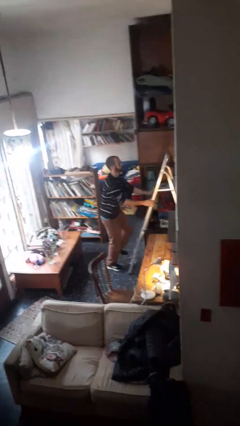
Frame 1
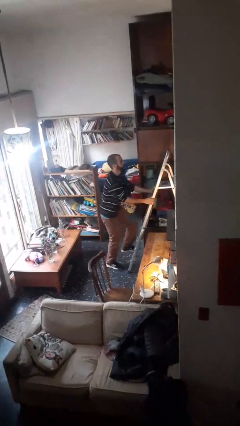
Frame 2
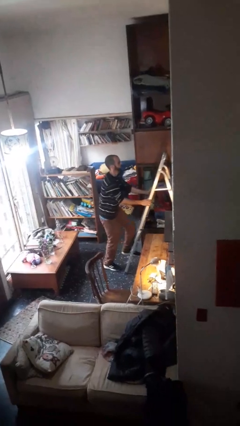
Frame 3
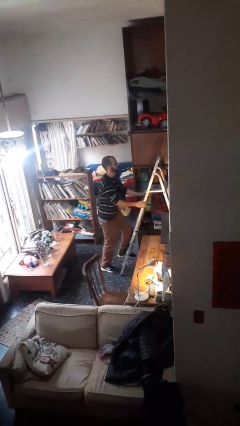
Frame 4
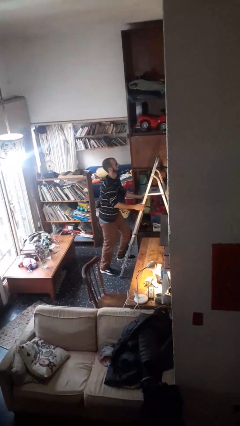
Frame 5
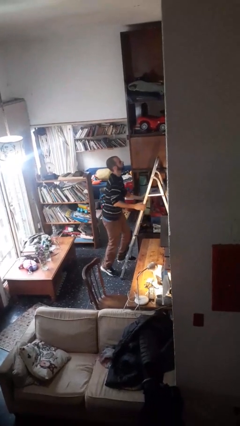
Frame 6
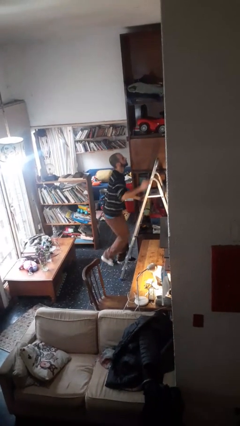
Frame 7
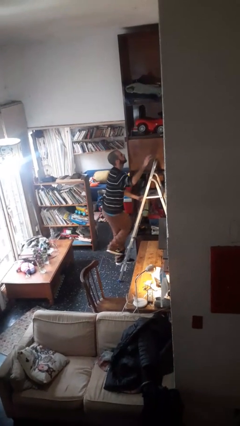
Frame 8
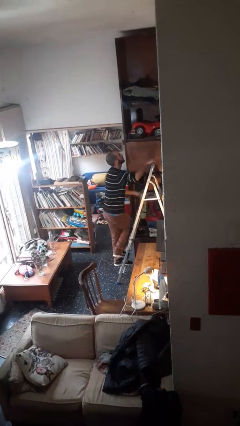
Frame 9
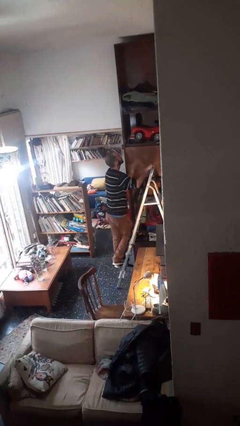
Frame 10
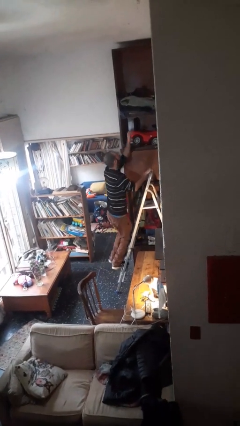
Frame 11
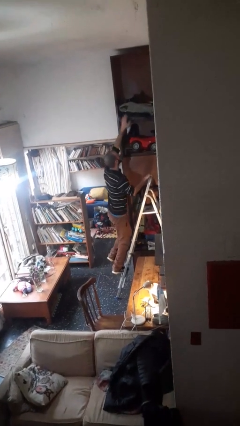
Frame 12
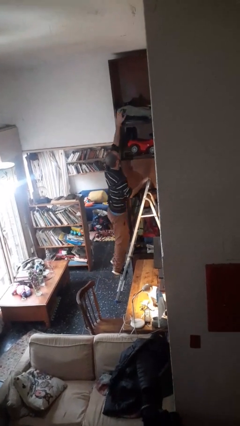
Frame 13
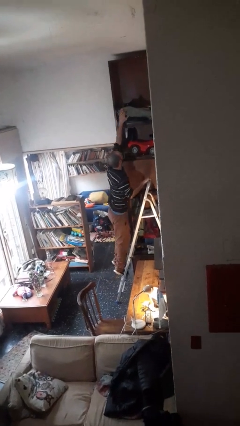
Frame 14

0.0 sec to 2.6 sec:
person climbs up ladder

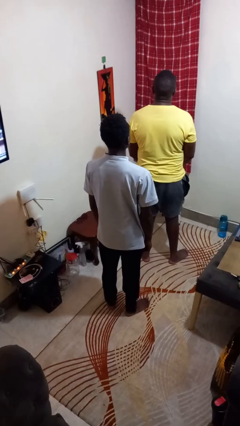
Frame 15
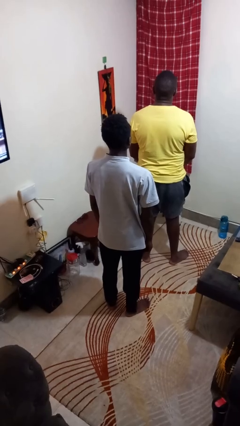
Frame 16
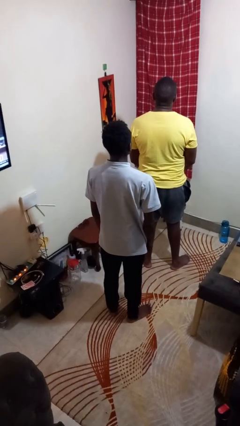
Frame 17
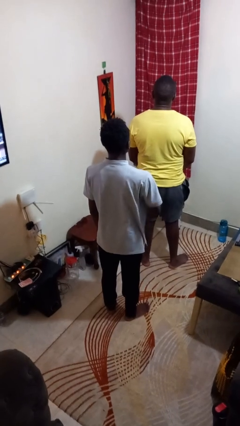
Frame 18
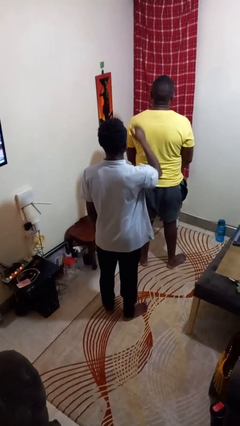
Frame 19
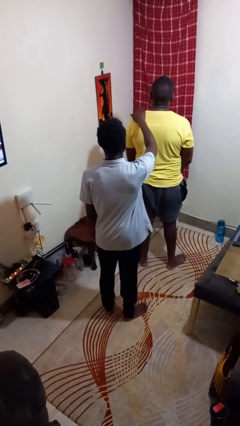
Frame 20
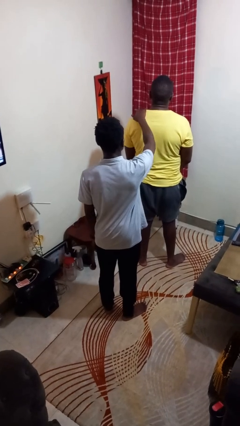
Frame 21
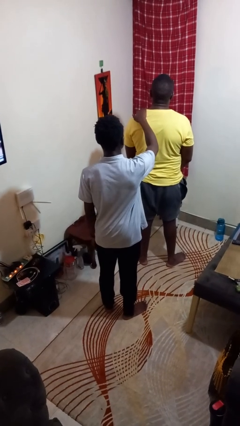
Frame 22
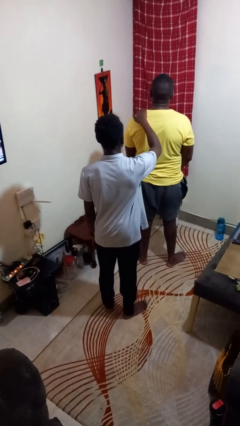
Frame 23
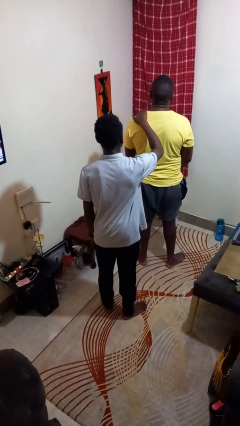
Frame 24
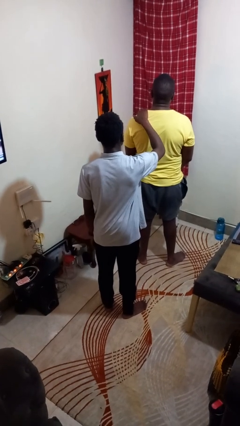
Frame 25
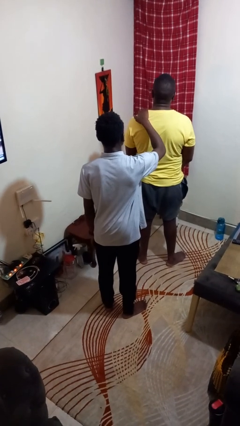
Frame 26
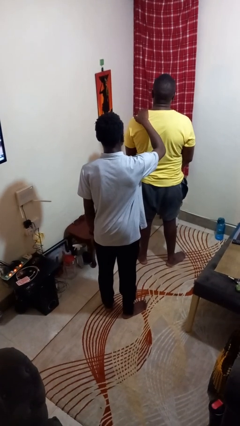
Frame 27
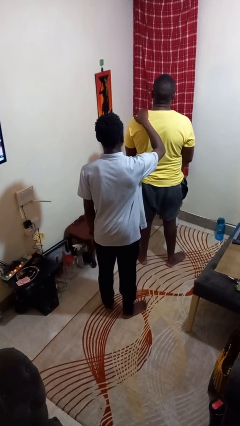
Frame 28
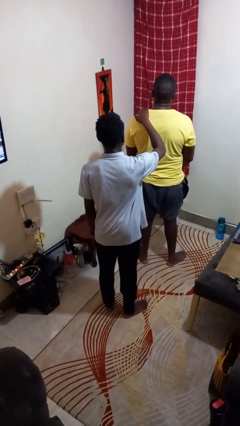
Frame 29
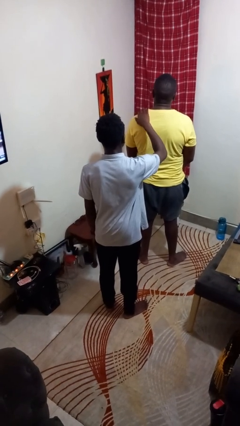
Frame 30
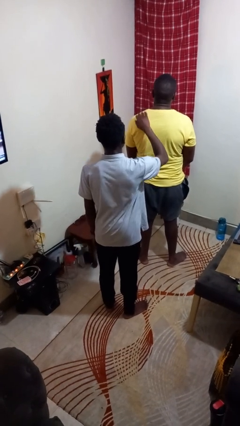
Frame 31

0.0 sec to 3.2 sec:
person touches back of person

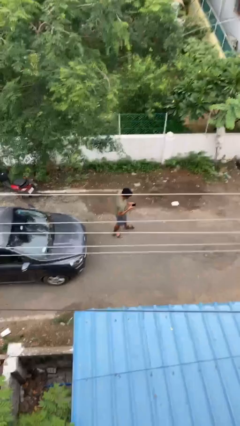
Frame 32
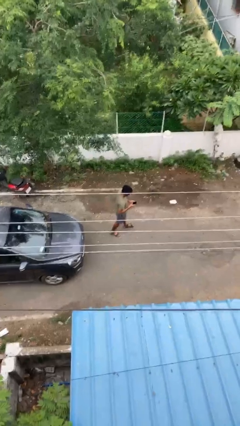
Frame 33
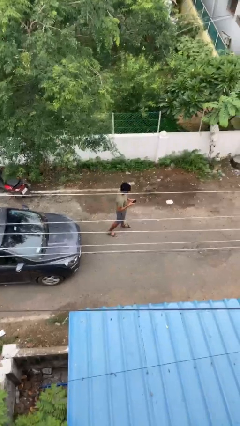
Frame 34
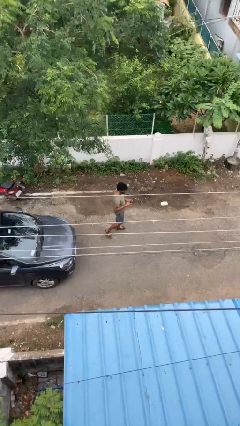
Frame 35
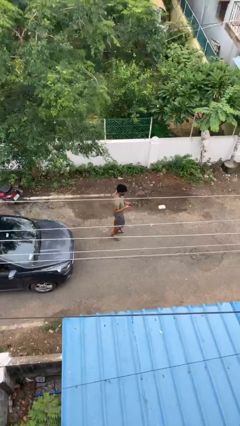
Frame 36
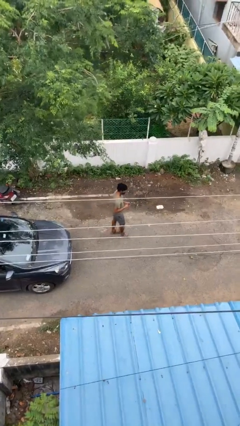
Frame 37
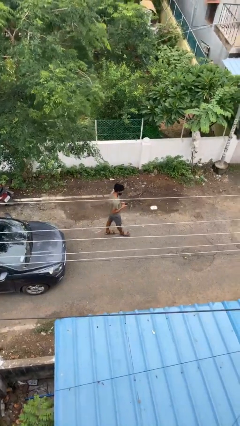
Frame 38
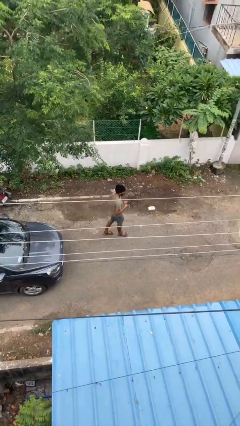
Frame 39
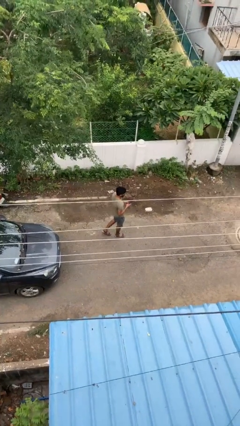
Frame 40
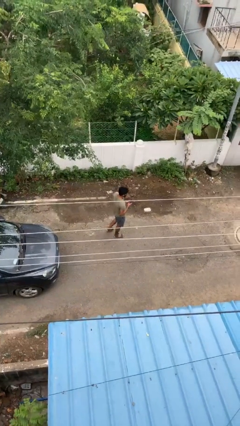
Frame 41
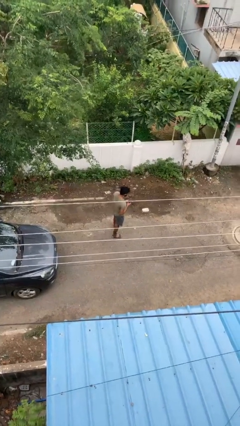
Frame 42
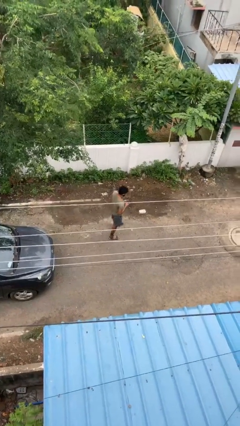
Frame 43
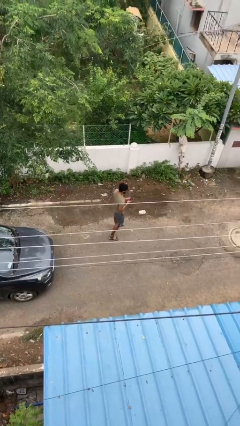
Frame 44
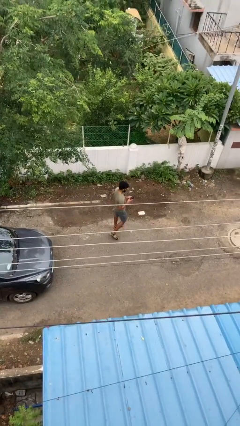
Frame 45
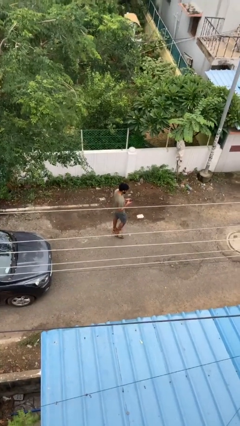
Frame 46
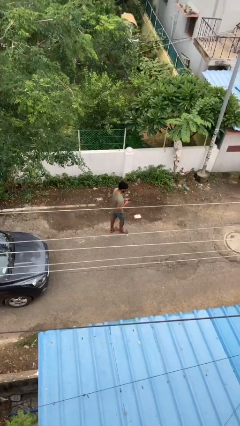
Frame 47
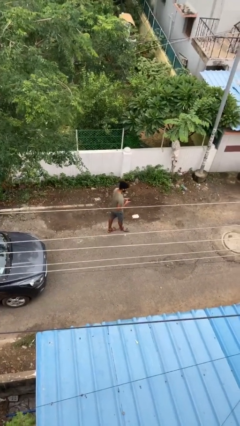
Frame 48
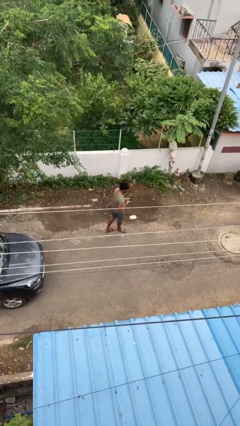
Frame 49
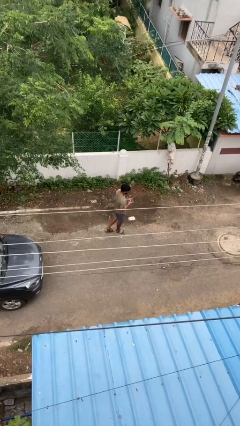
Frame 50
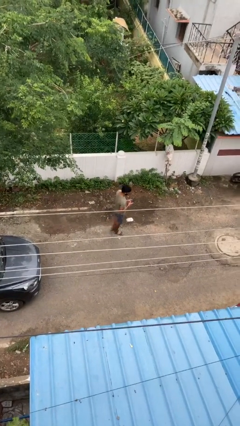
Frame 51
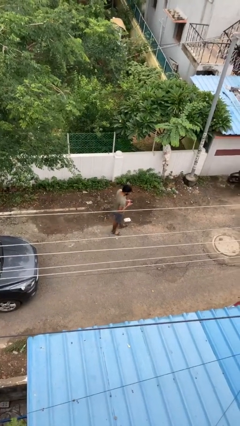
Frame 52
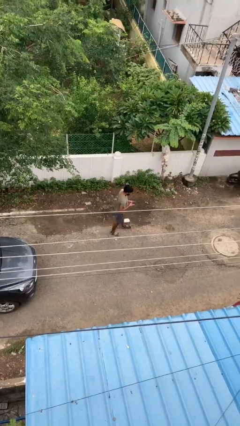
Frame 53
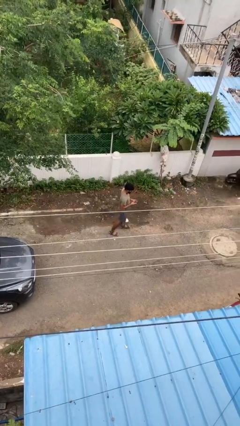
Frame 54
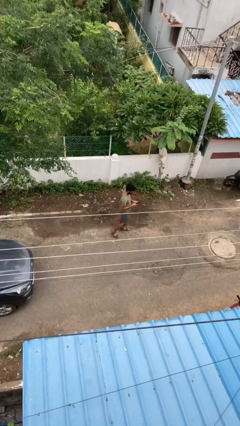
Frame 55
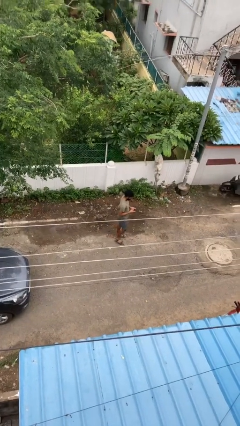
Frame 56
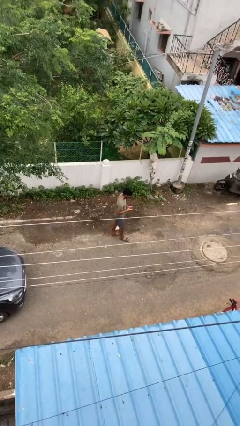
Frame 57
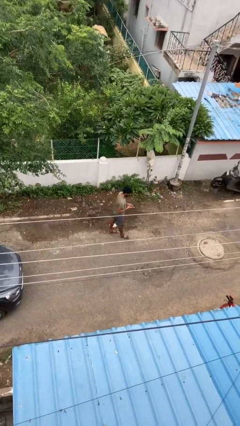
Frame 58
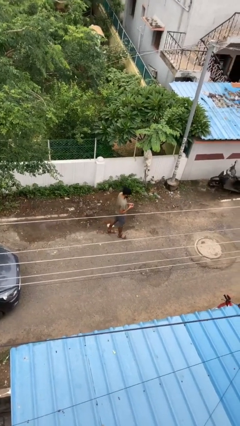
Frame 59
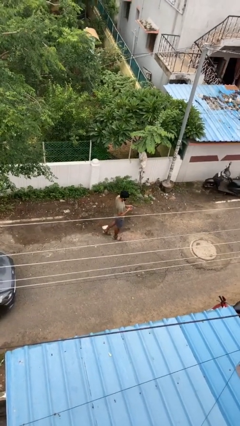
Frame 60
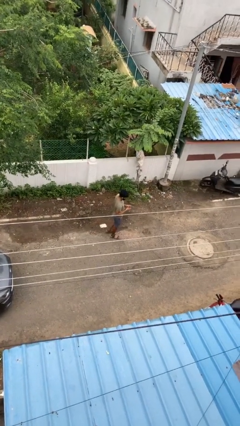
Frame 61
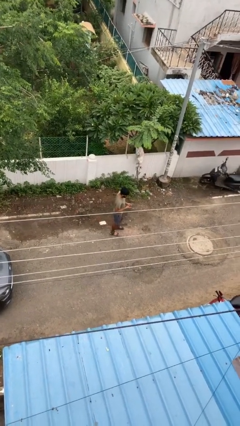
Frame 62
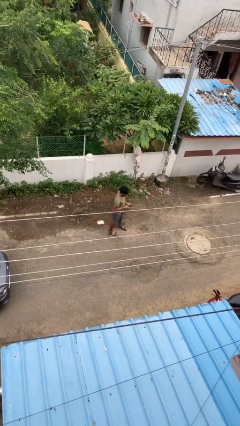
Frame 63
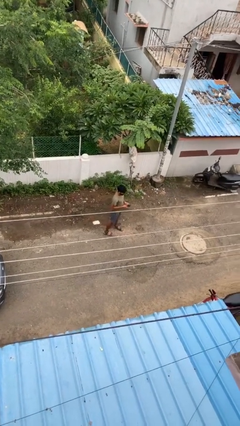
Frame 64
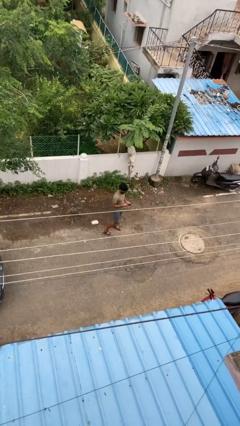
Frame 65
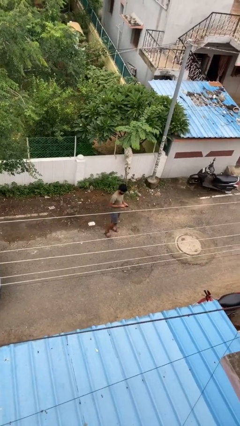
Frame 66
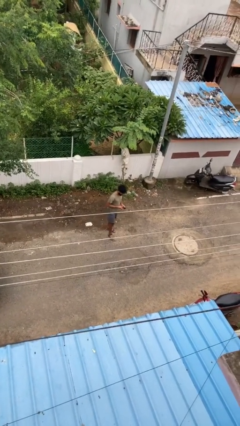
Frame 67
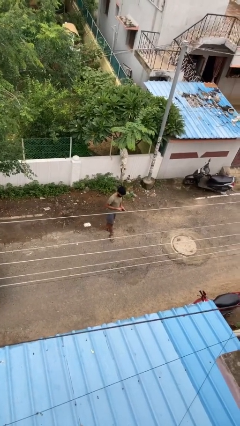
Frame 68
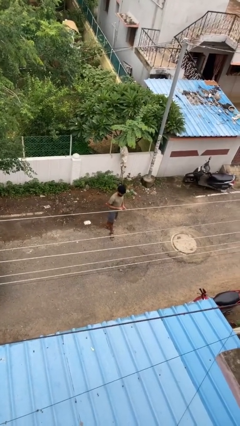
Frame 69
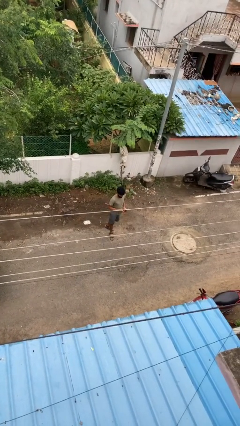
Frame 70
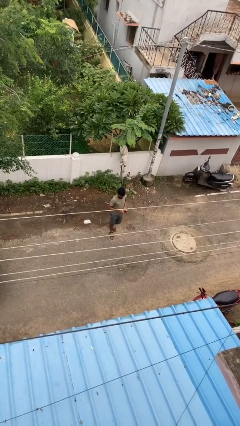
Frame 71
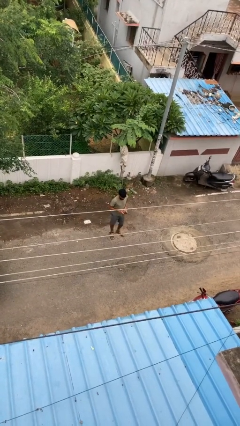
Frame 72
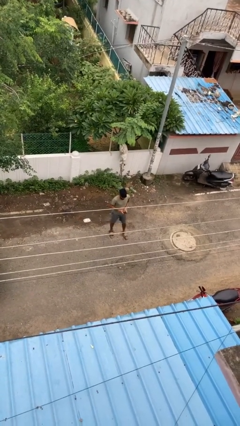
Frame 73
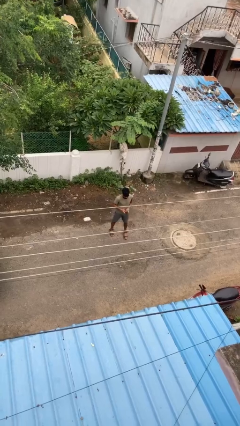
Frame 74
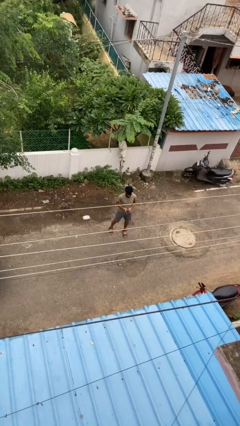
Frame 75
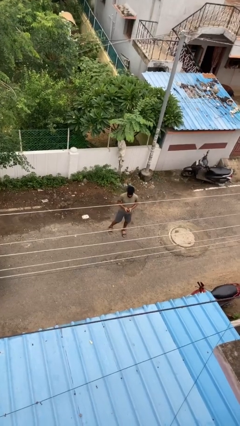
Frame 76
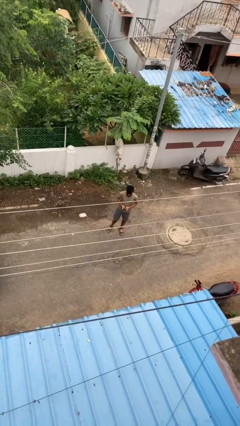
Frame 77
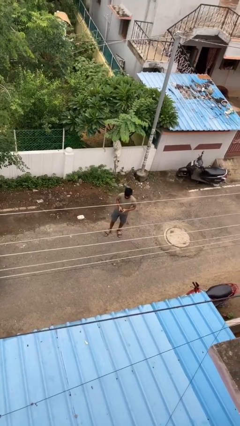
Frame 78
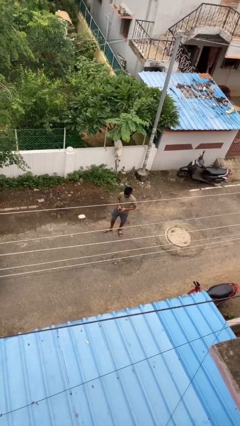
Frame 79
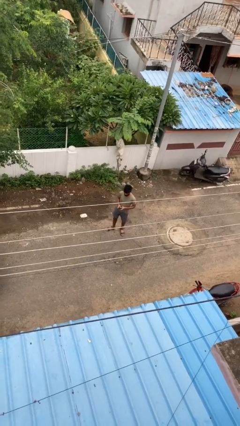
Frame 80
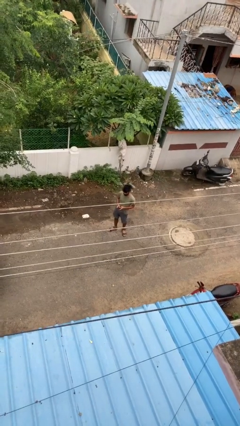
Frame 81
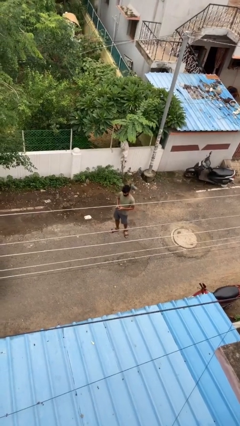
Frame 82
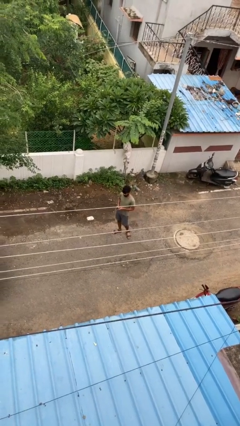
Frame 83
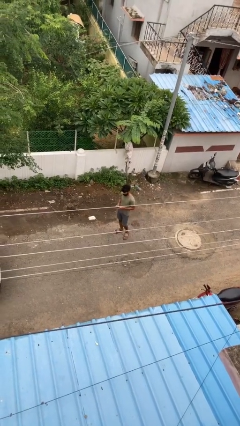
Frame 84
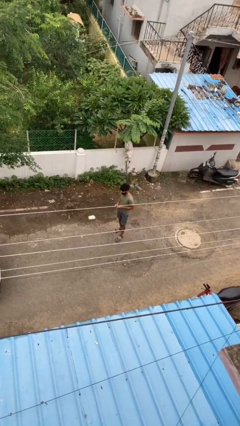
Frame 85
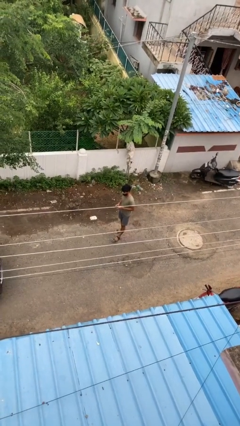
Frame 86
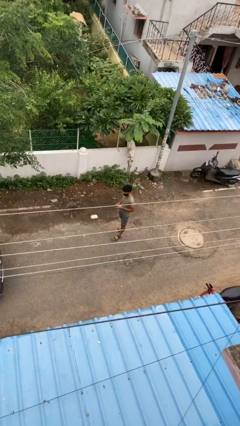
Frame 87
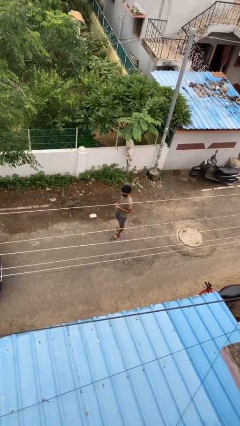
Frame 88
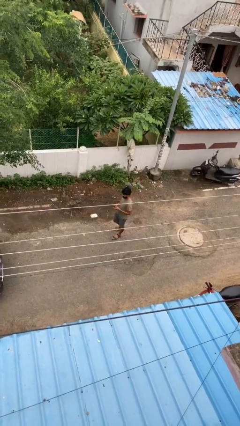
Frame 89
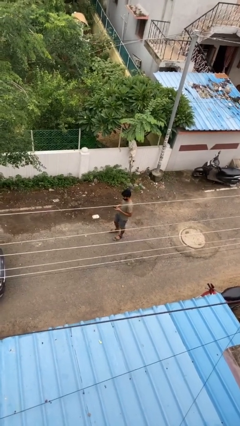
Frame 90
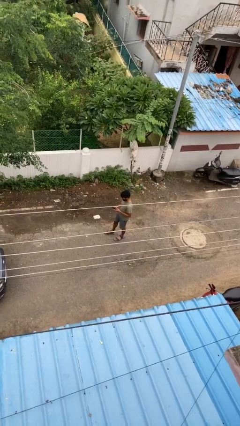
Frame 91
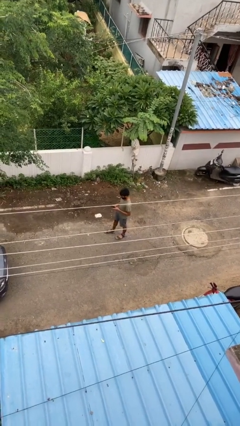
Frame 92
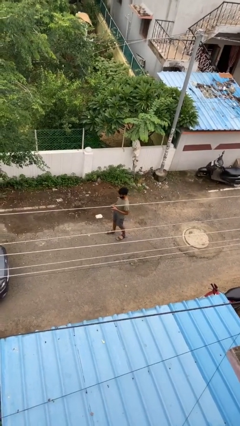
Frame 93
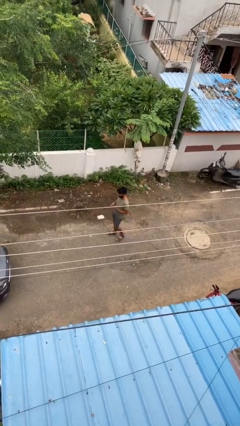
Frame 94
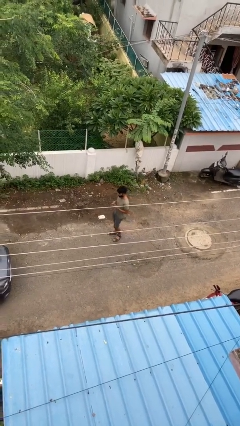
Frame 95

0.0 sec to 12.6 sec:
person texts on phone
